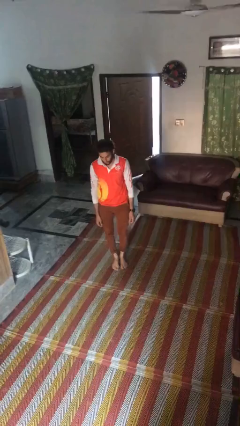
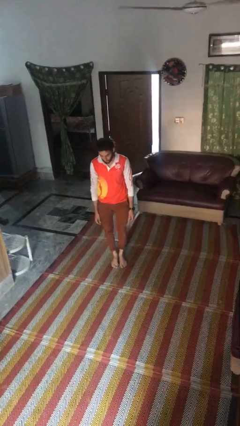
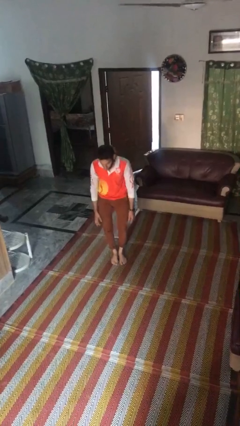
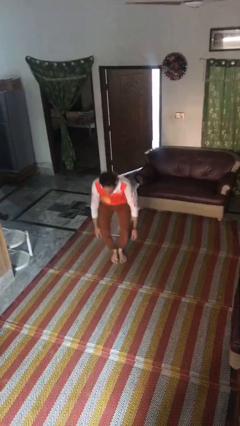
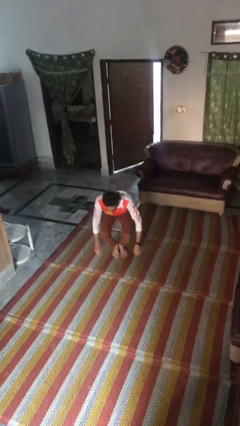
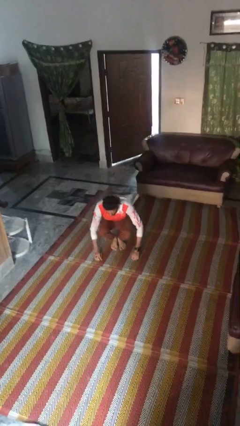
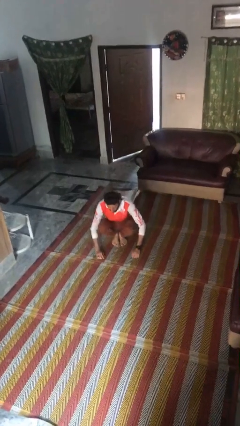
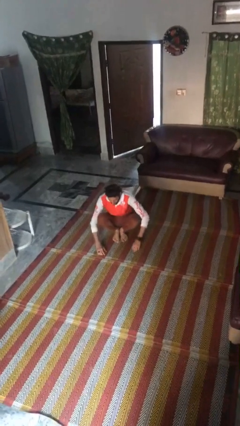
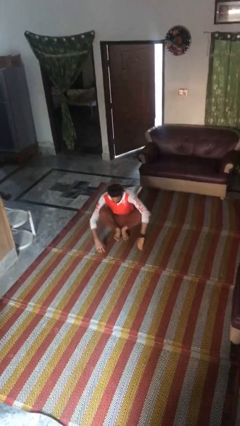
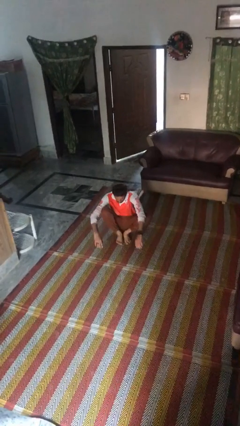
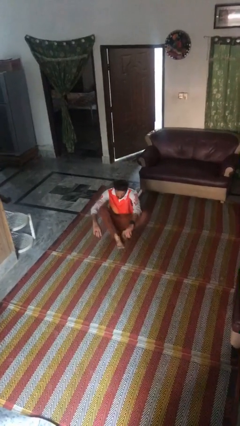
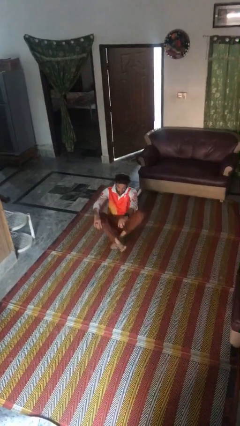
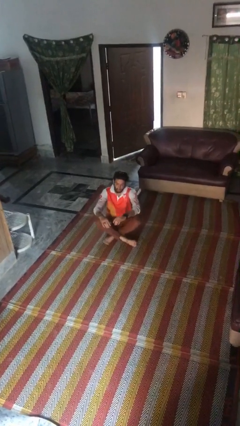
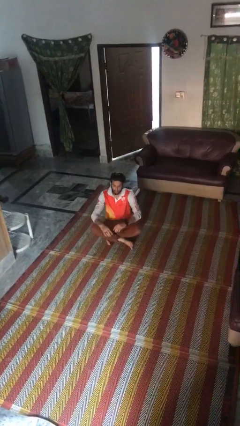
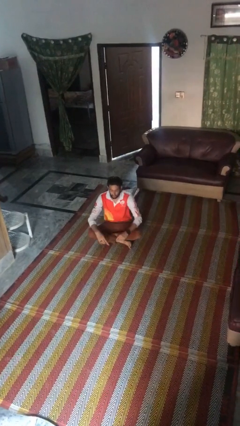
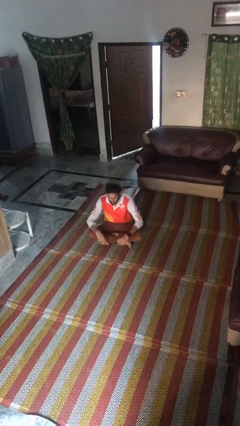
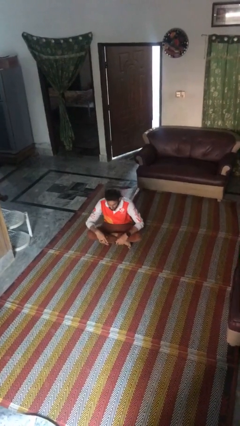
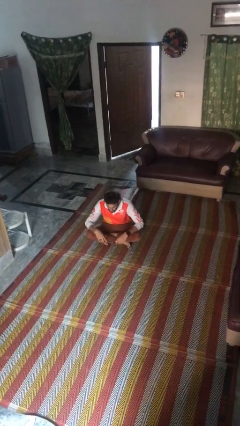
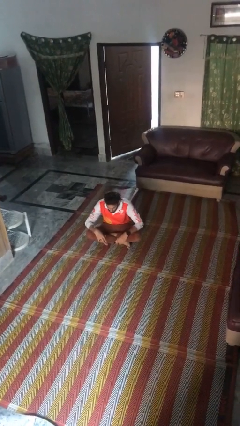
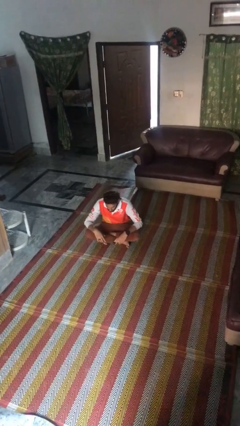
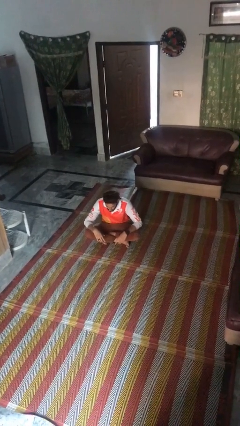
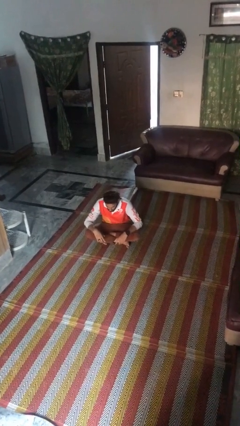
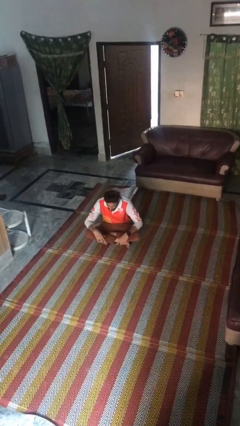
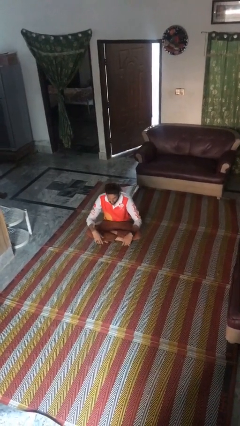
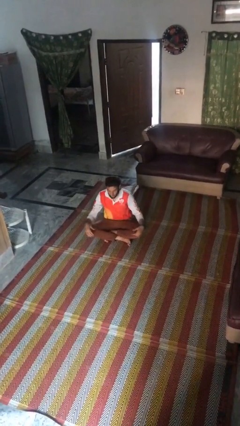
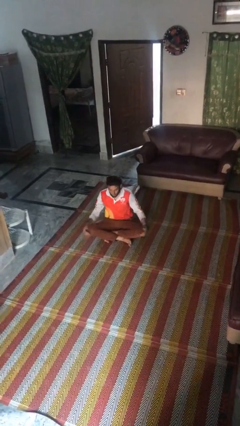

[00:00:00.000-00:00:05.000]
person sits crisscross

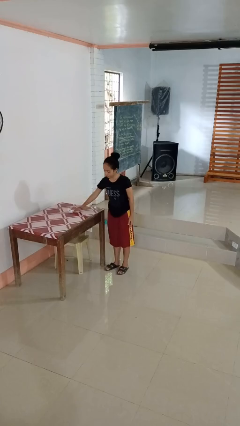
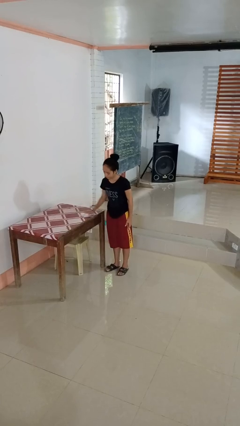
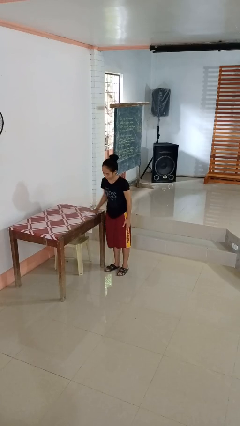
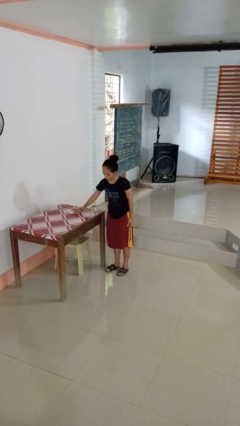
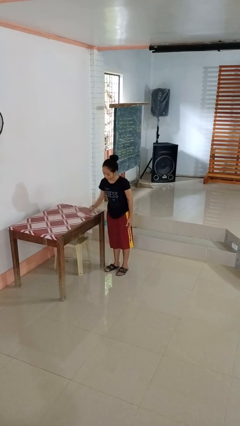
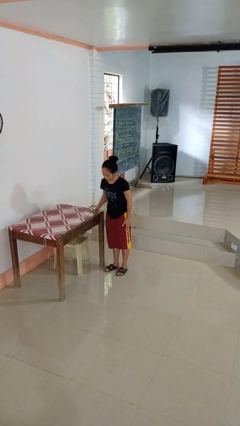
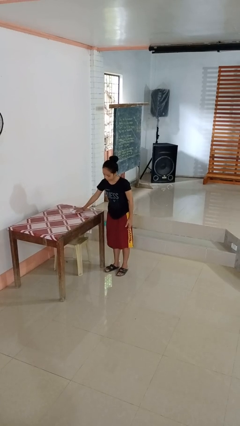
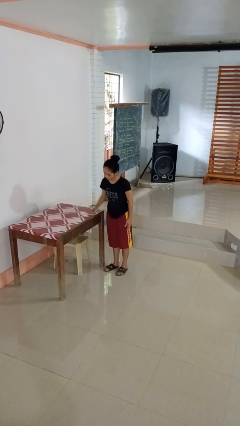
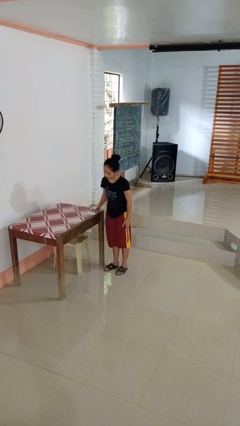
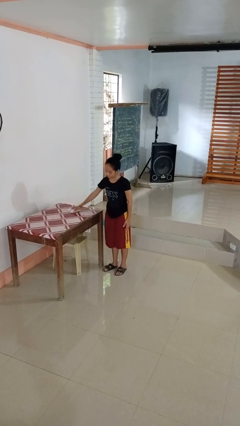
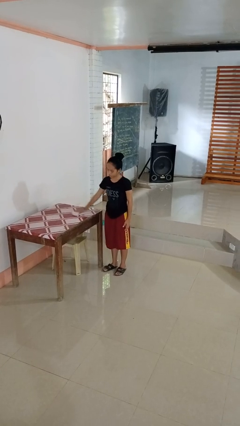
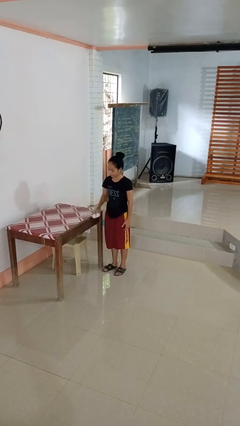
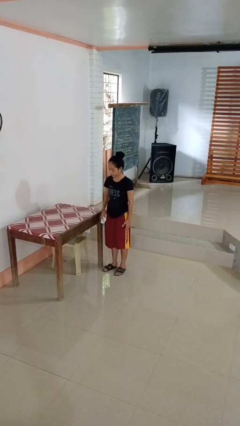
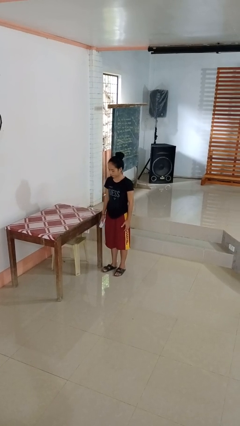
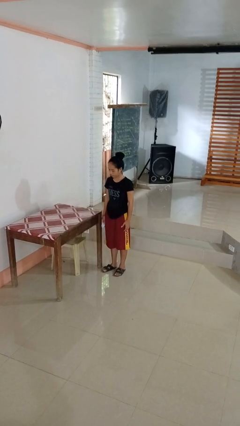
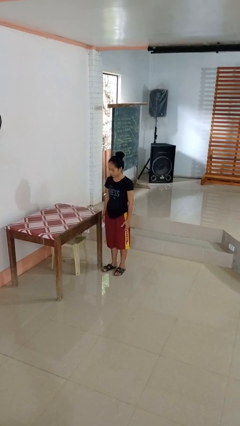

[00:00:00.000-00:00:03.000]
person cleans table with rag

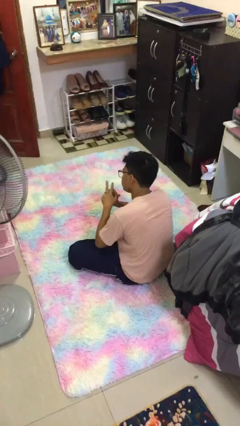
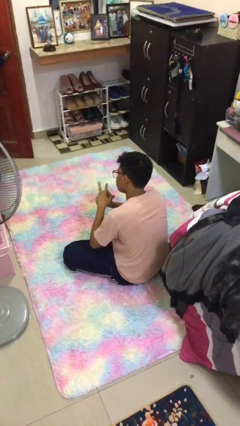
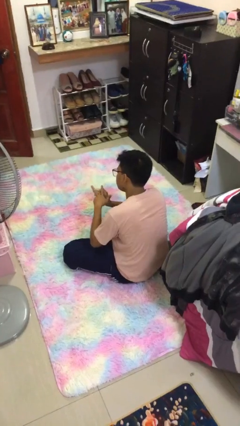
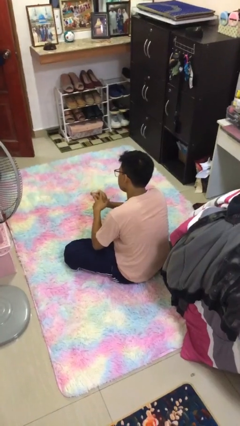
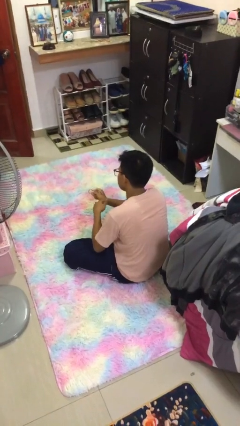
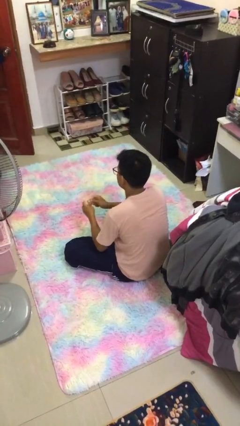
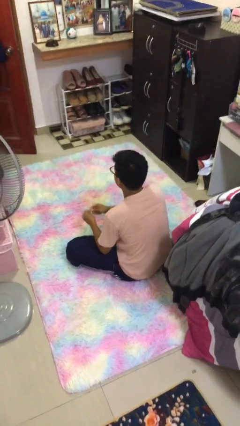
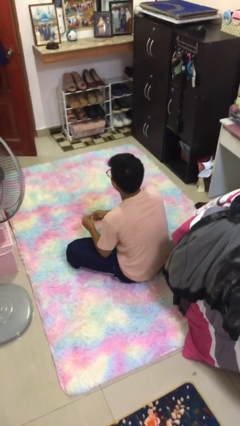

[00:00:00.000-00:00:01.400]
person takes off ring

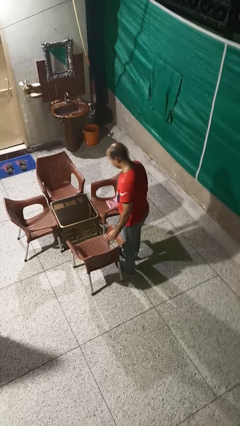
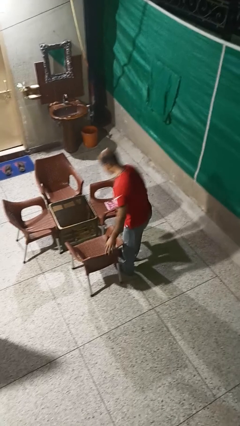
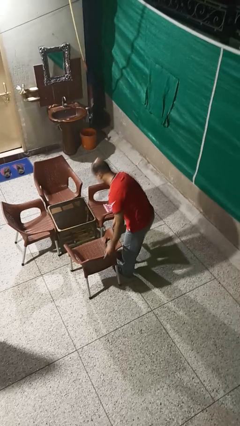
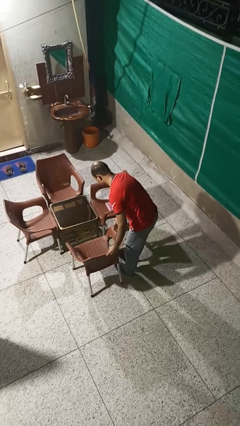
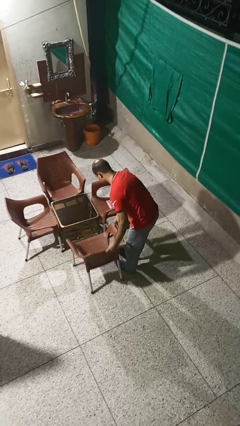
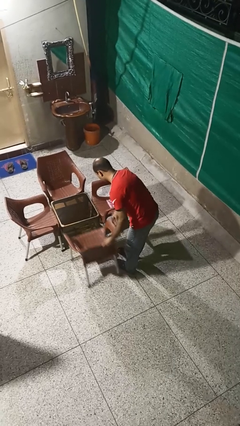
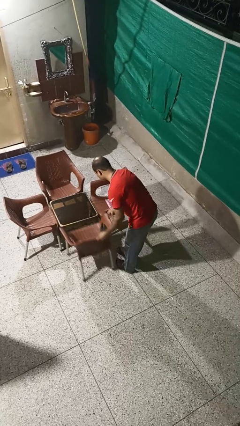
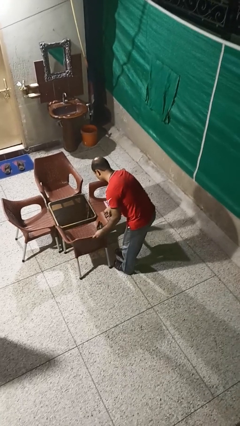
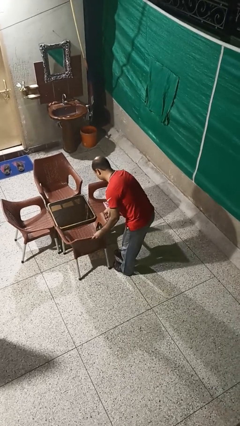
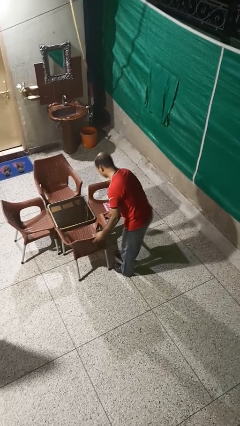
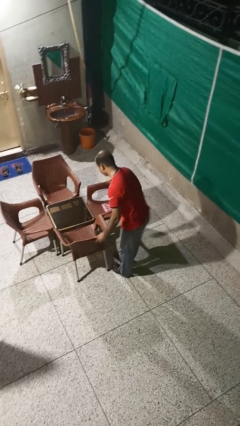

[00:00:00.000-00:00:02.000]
person pushes in chair

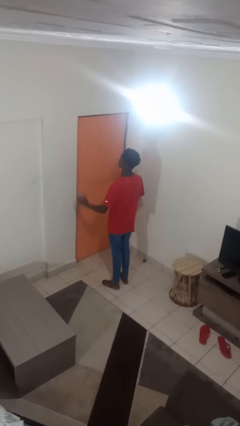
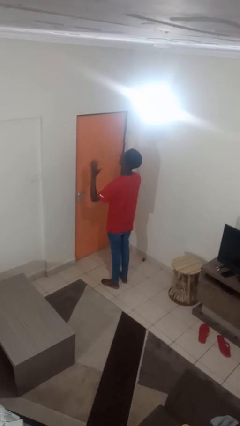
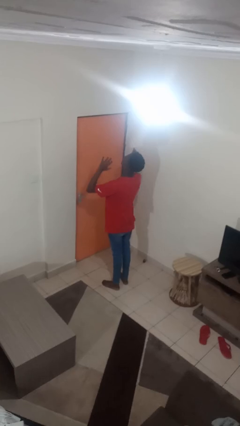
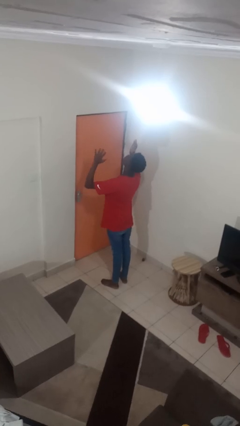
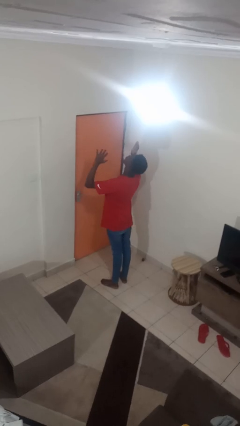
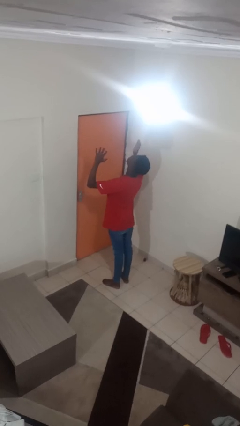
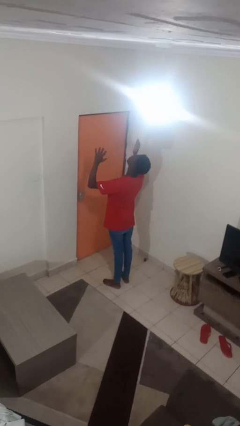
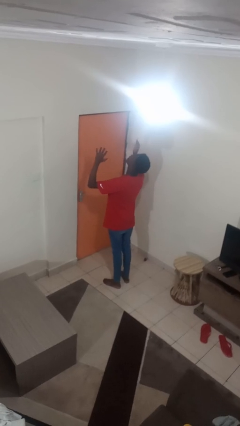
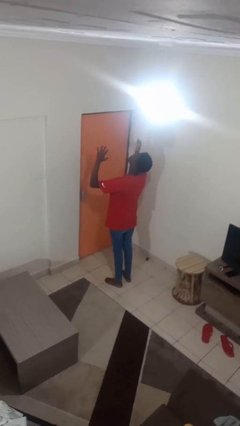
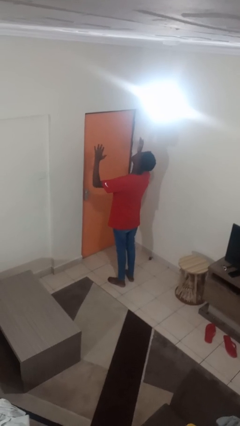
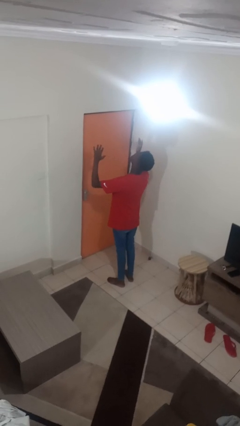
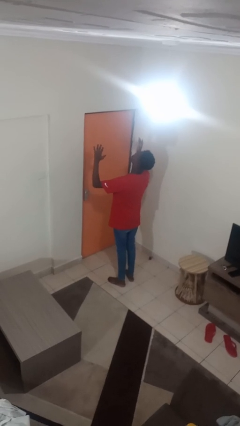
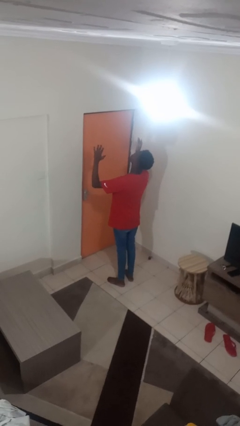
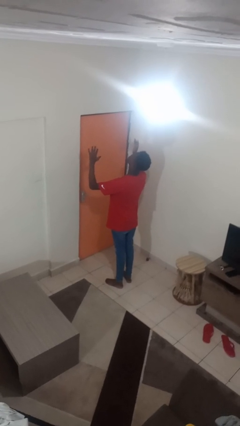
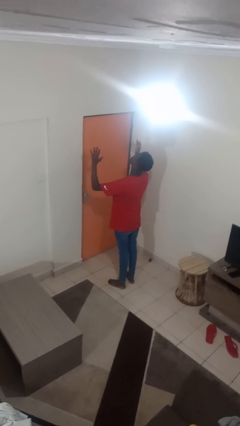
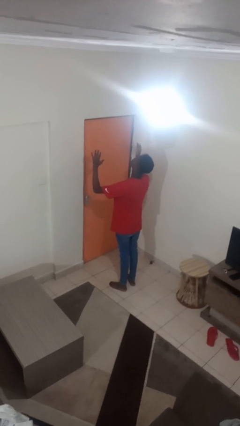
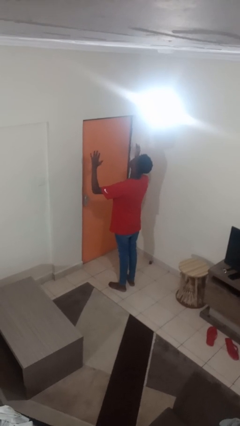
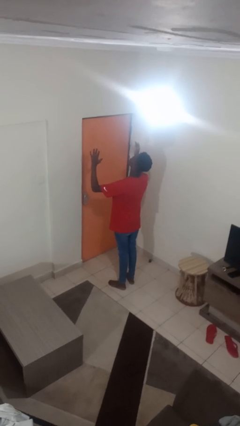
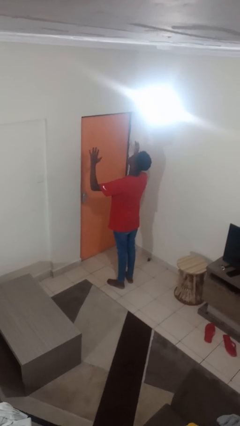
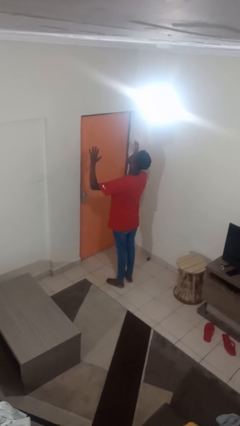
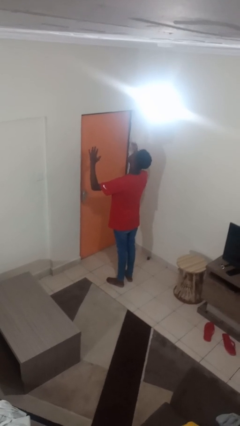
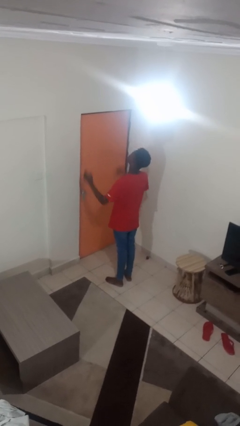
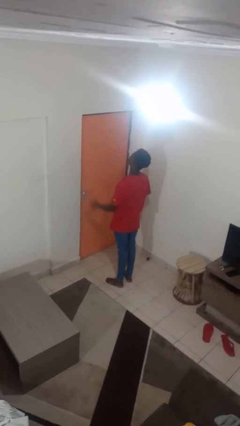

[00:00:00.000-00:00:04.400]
person prays

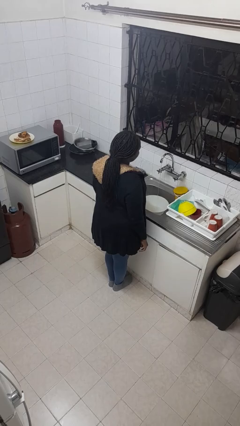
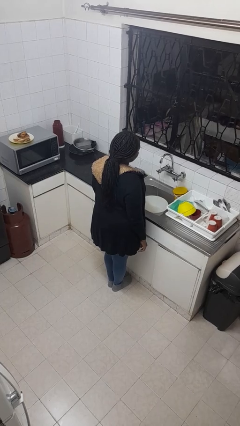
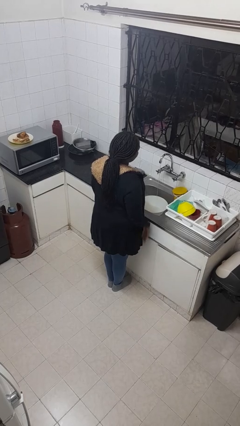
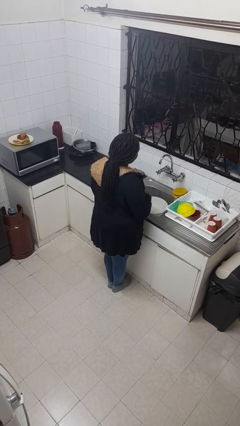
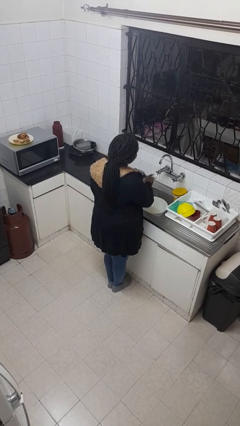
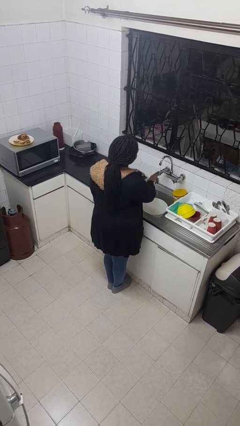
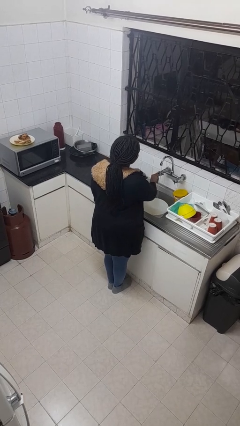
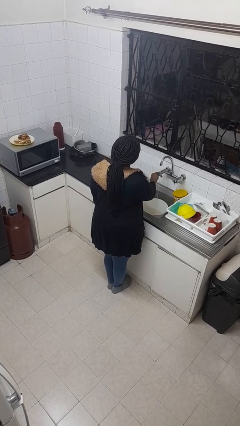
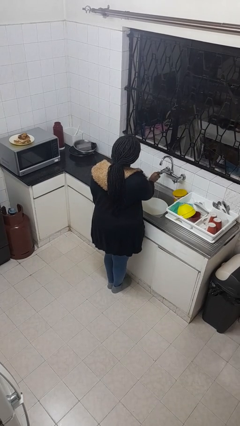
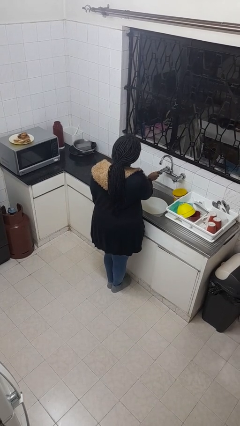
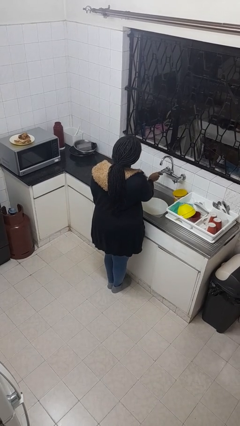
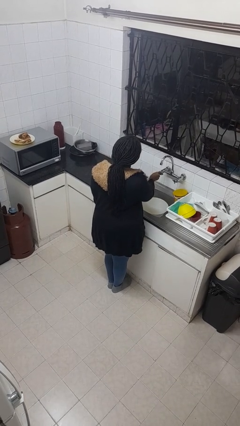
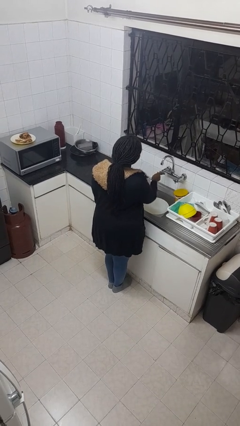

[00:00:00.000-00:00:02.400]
person turns off faucet
